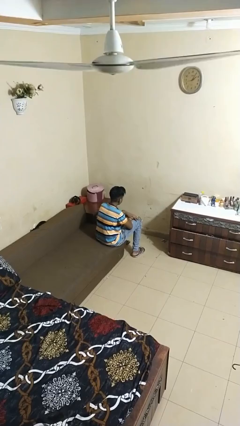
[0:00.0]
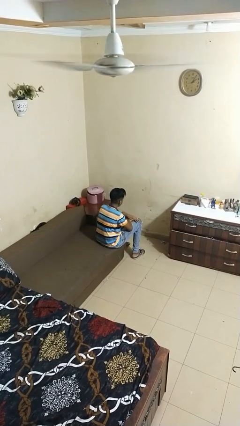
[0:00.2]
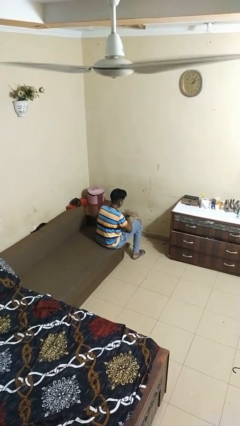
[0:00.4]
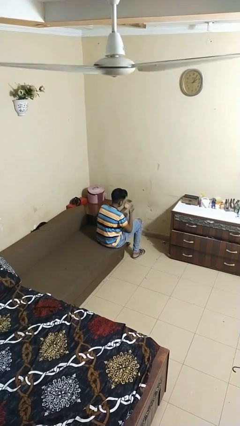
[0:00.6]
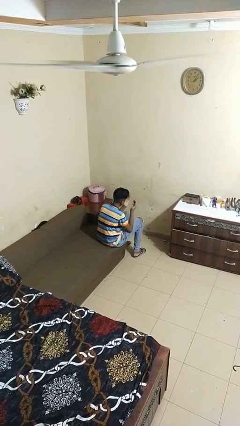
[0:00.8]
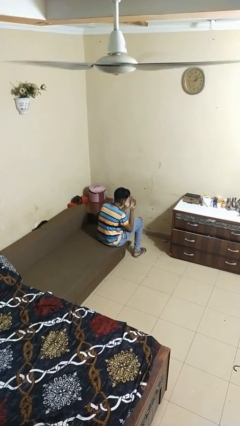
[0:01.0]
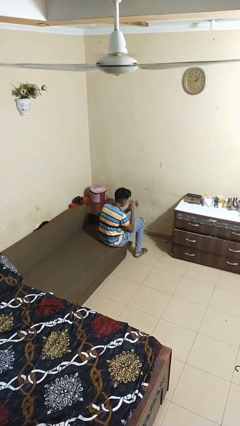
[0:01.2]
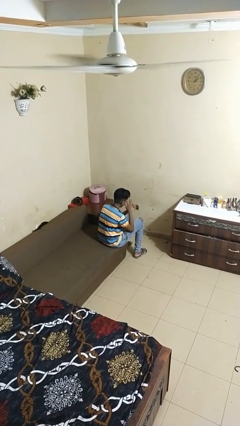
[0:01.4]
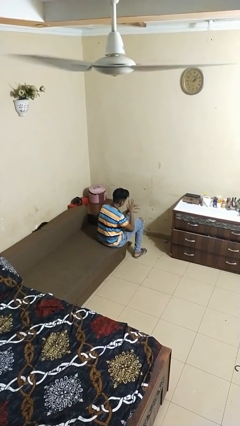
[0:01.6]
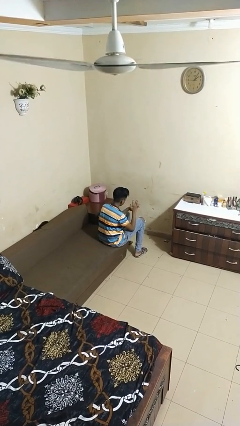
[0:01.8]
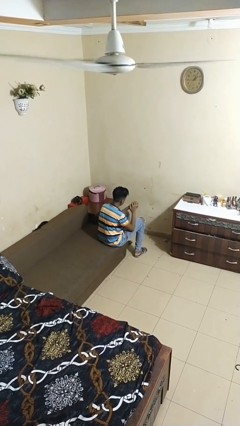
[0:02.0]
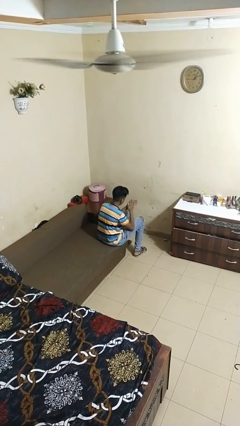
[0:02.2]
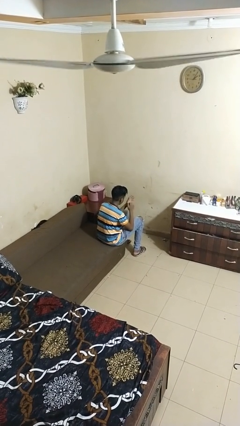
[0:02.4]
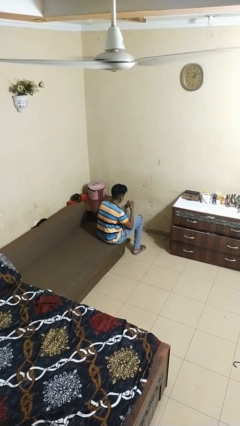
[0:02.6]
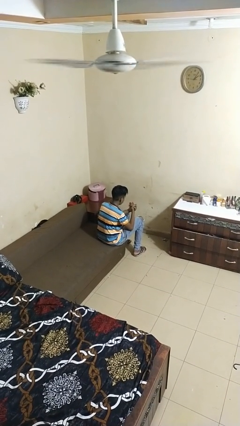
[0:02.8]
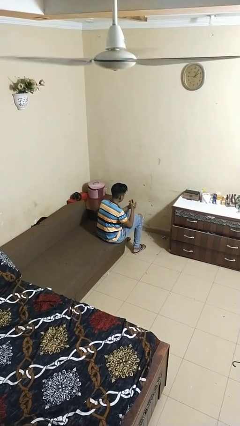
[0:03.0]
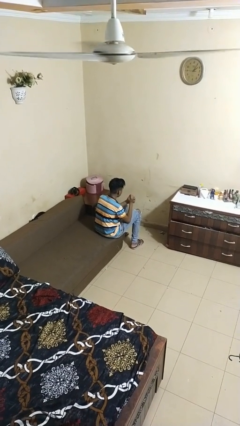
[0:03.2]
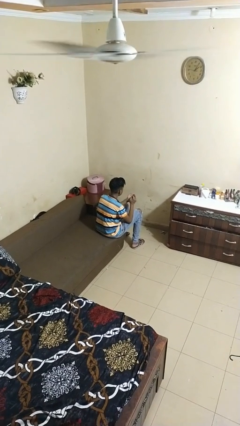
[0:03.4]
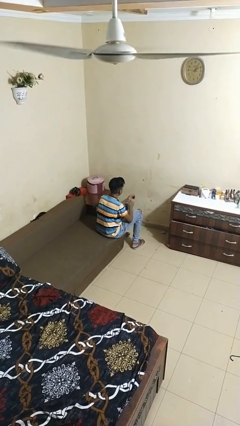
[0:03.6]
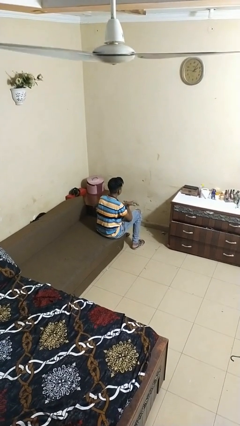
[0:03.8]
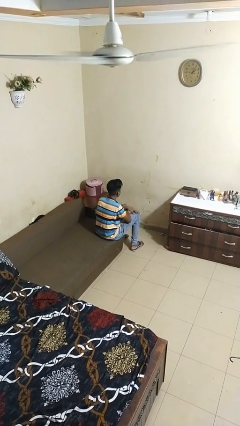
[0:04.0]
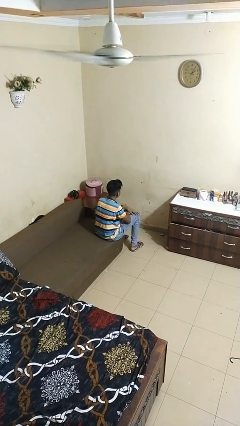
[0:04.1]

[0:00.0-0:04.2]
person looks at hands in lap

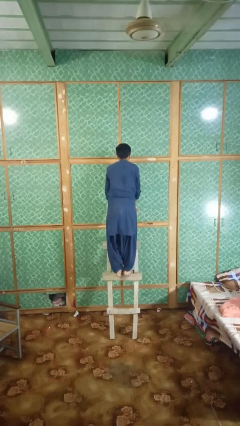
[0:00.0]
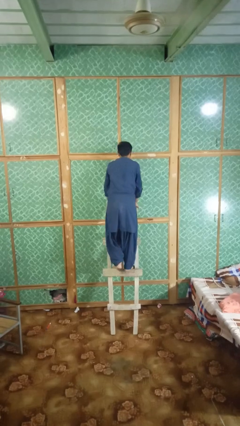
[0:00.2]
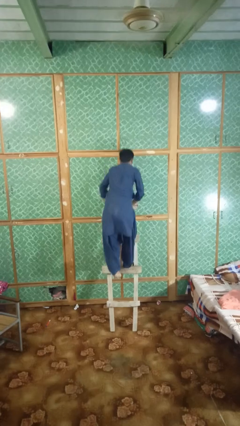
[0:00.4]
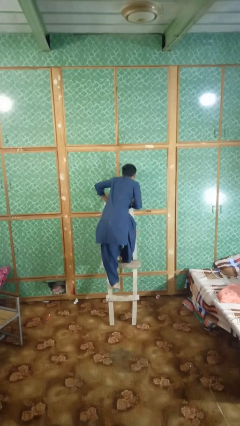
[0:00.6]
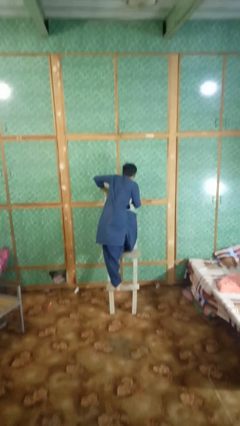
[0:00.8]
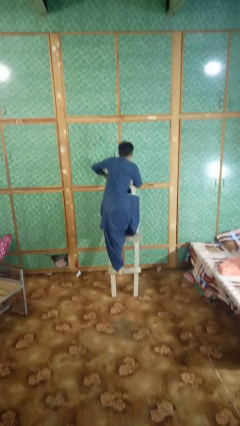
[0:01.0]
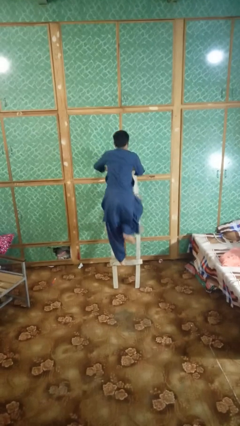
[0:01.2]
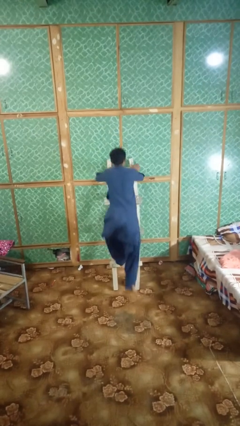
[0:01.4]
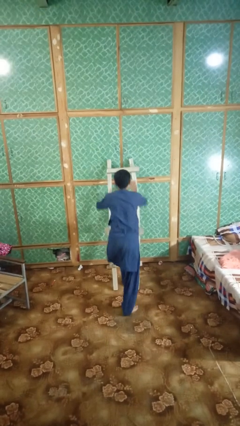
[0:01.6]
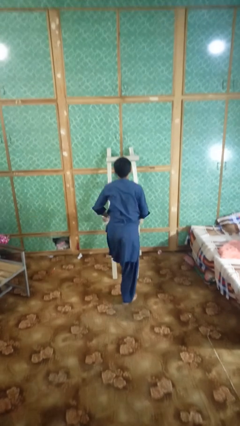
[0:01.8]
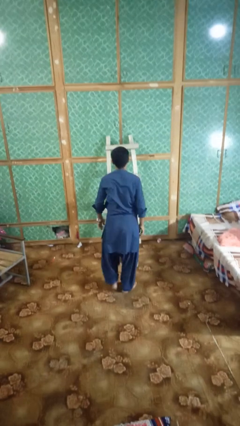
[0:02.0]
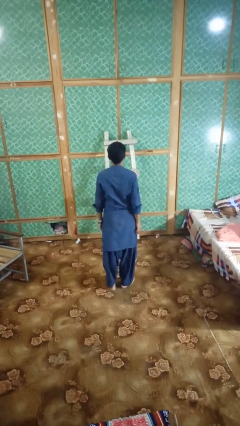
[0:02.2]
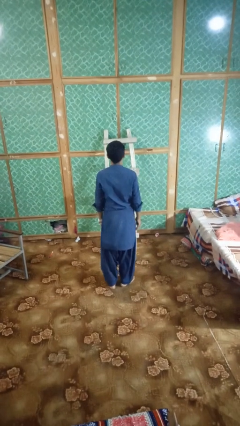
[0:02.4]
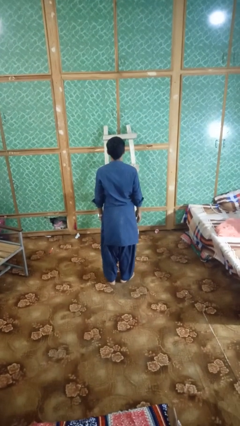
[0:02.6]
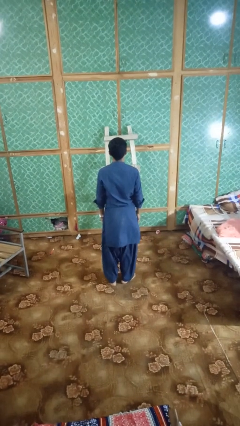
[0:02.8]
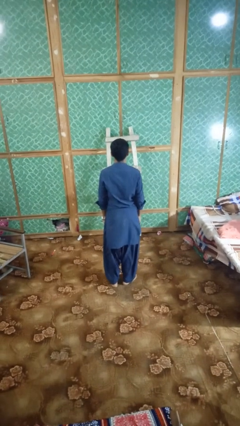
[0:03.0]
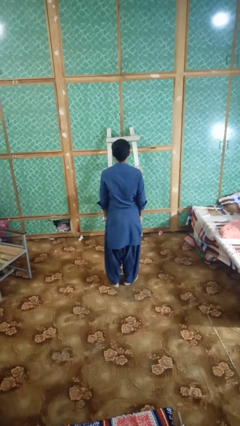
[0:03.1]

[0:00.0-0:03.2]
person climbs down ladder

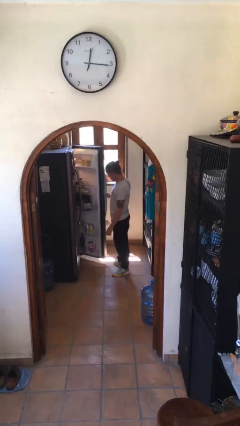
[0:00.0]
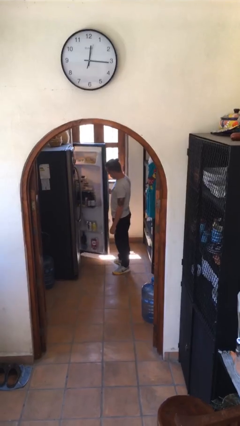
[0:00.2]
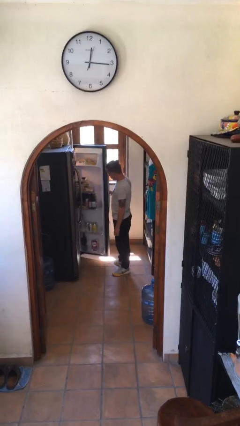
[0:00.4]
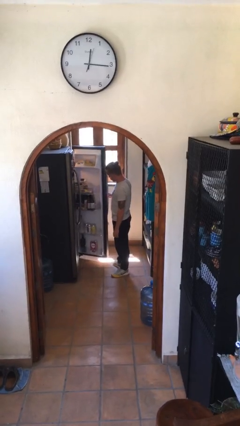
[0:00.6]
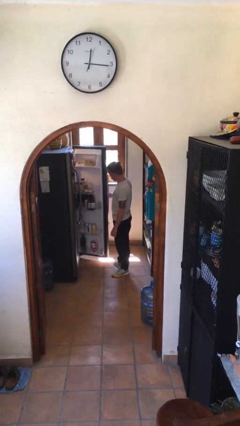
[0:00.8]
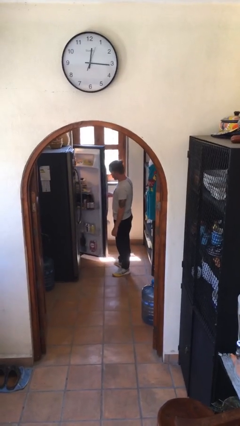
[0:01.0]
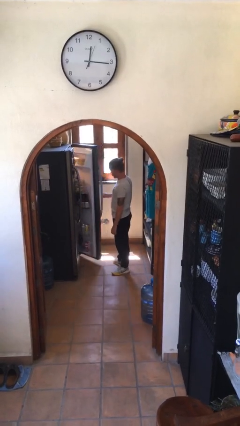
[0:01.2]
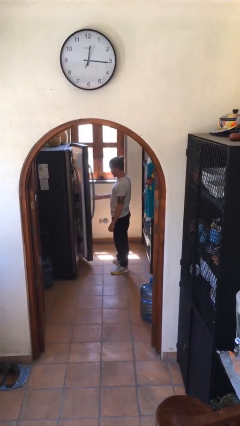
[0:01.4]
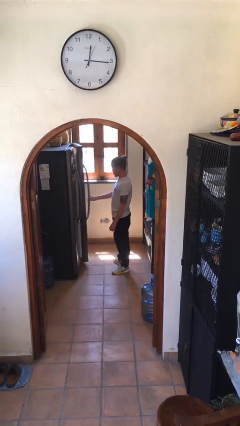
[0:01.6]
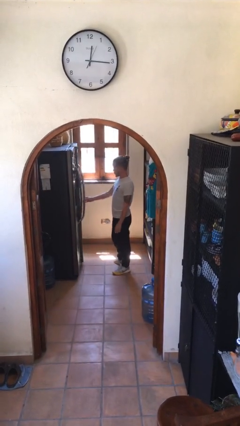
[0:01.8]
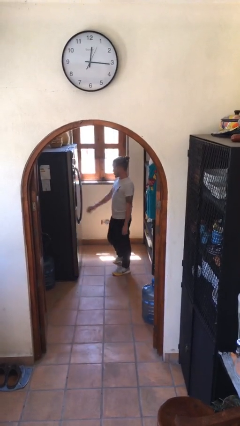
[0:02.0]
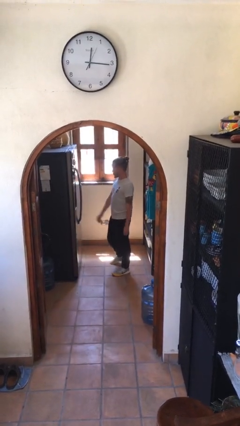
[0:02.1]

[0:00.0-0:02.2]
person closes refrigerator

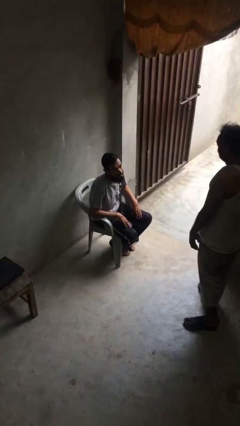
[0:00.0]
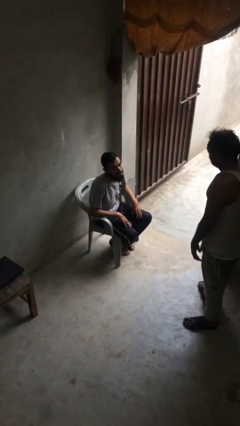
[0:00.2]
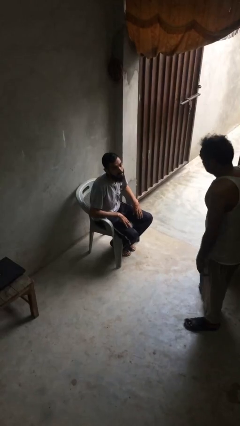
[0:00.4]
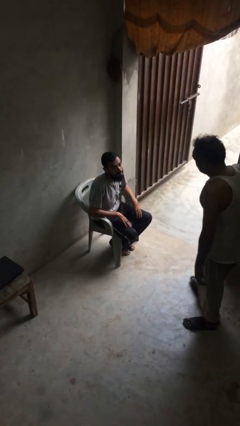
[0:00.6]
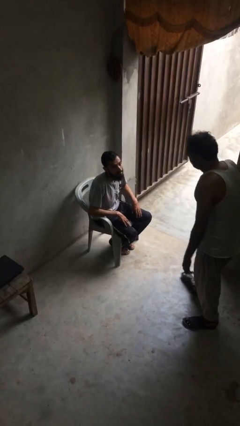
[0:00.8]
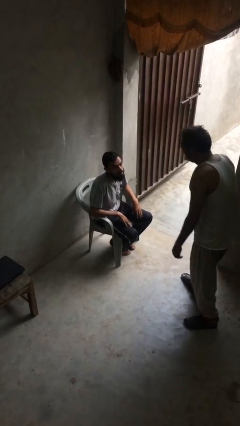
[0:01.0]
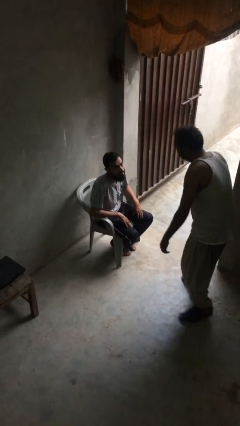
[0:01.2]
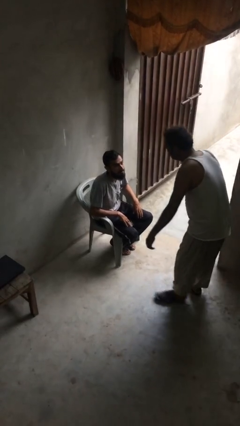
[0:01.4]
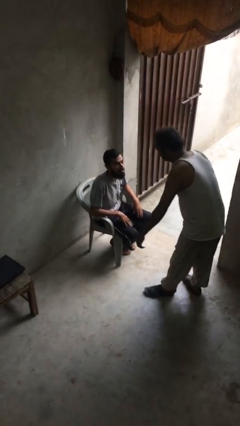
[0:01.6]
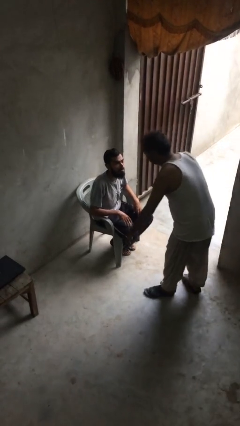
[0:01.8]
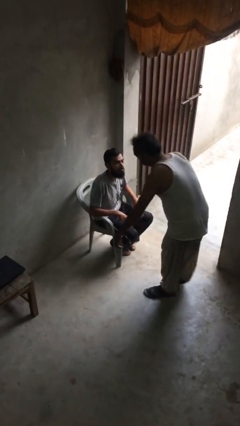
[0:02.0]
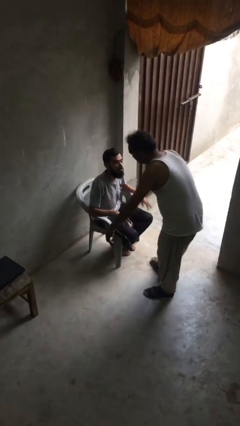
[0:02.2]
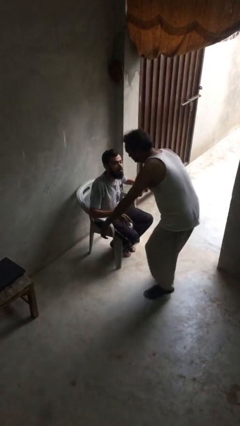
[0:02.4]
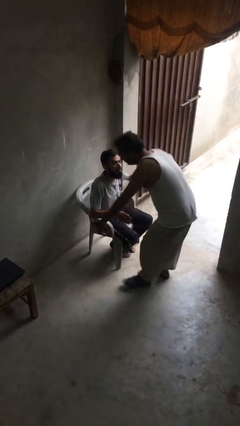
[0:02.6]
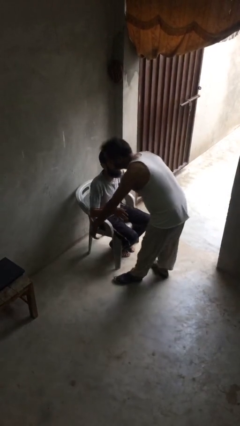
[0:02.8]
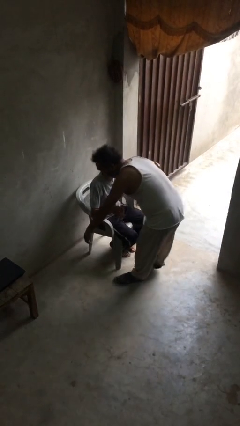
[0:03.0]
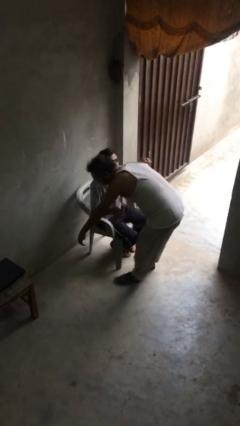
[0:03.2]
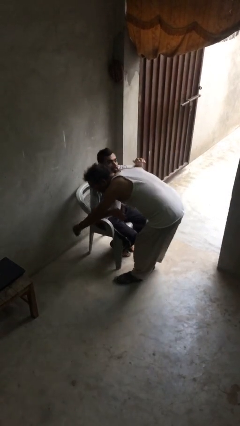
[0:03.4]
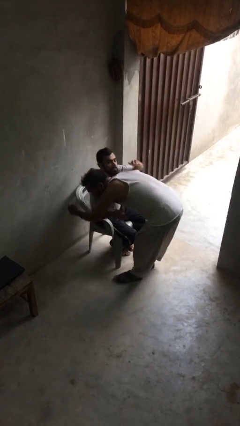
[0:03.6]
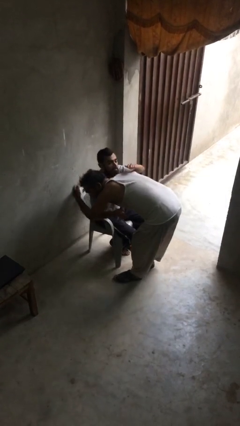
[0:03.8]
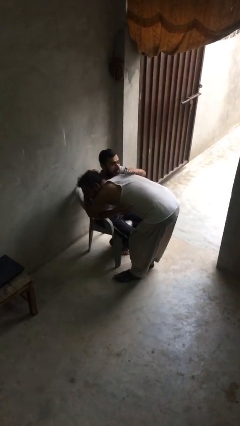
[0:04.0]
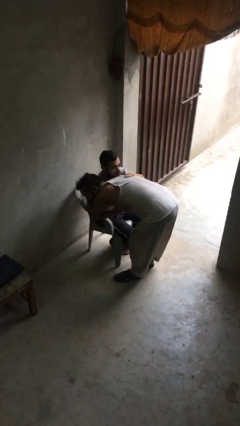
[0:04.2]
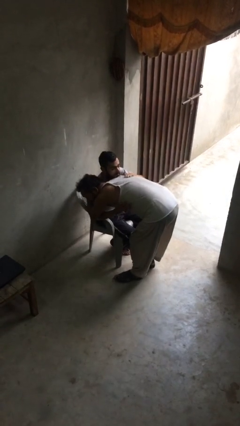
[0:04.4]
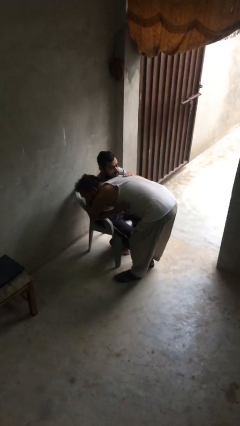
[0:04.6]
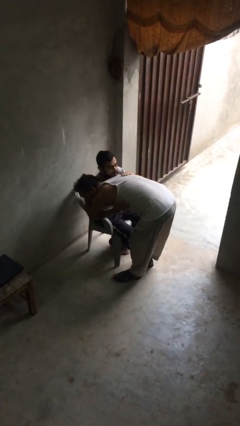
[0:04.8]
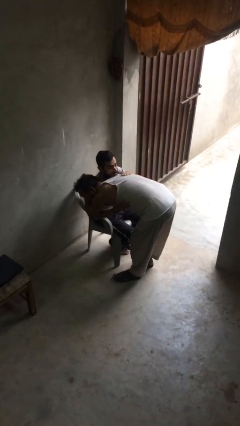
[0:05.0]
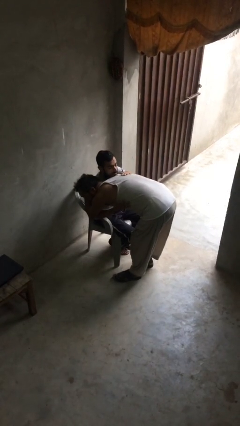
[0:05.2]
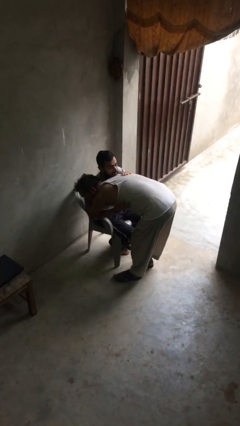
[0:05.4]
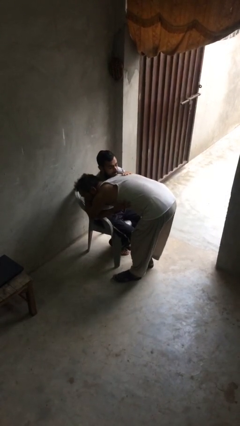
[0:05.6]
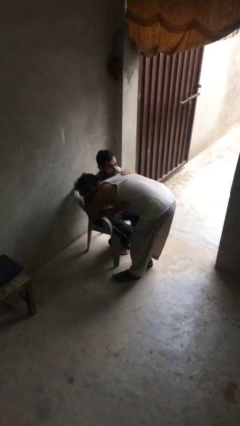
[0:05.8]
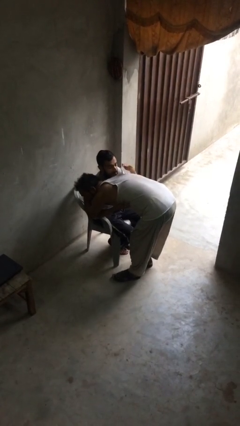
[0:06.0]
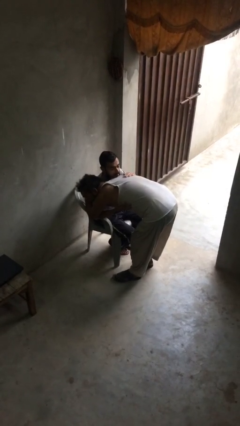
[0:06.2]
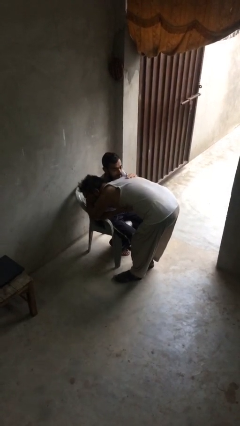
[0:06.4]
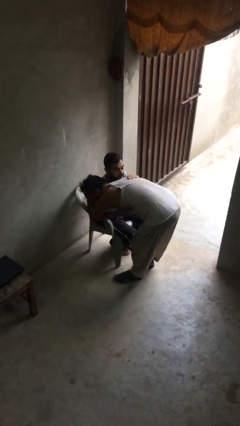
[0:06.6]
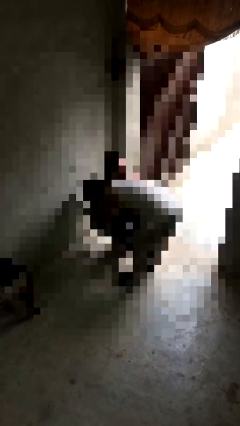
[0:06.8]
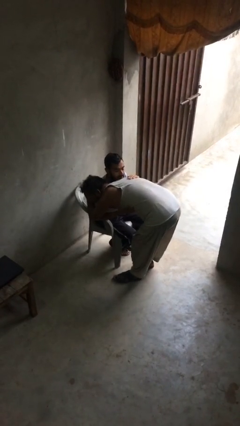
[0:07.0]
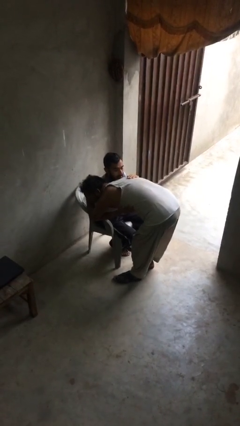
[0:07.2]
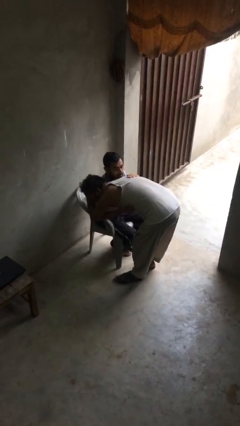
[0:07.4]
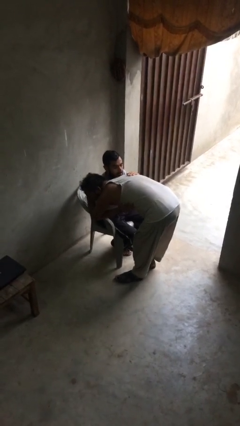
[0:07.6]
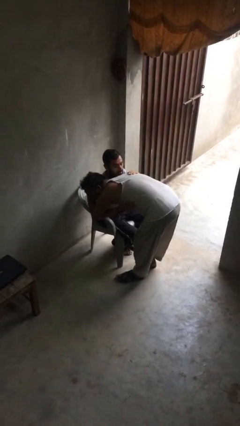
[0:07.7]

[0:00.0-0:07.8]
person embraces person

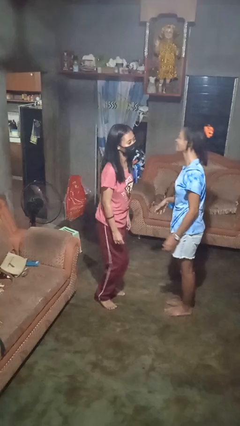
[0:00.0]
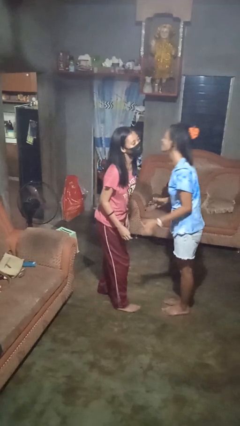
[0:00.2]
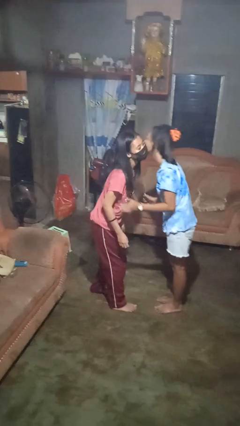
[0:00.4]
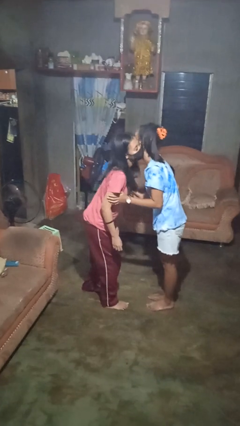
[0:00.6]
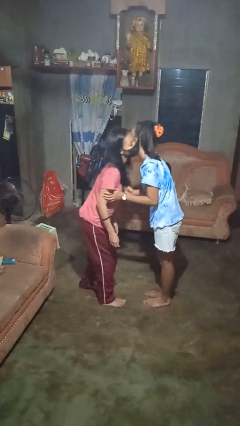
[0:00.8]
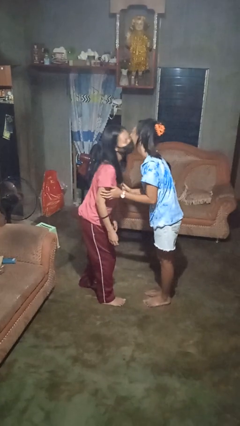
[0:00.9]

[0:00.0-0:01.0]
person kisses cheek of person
